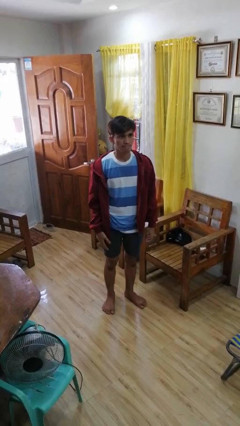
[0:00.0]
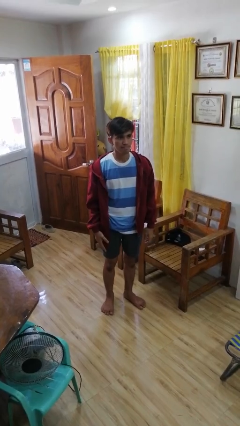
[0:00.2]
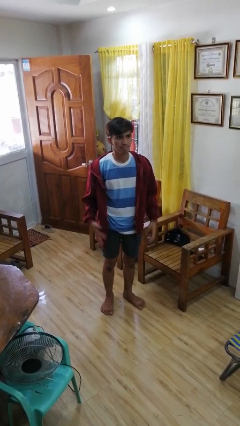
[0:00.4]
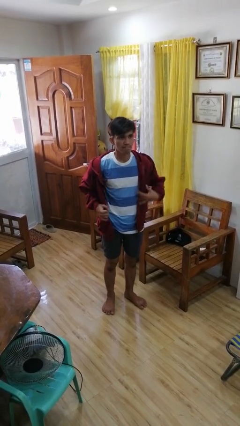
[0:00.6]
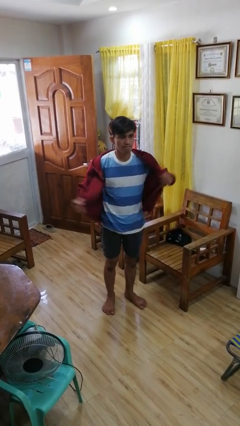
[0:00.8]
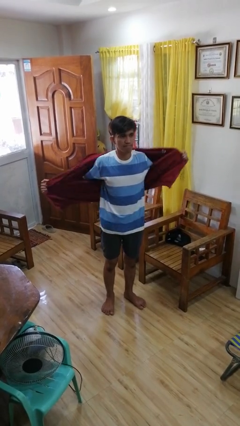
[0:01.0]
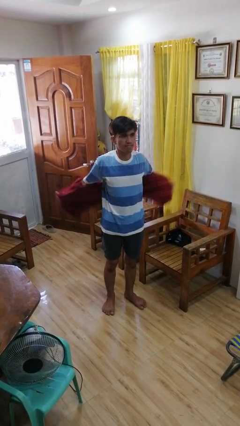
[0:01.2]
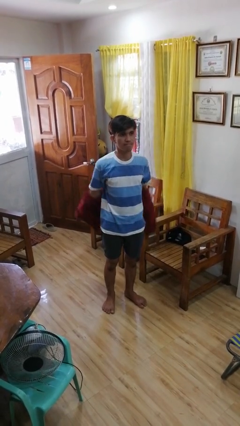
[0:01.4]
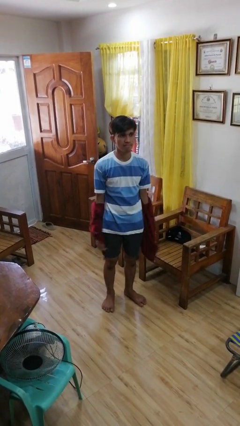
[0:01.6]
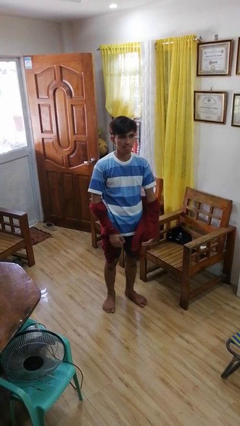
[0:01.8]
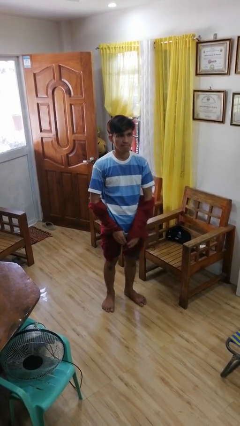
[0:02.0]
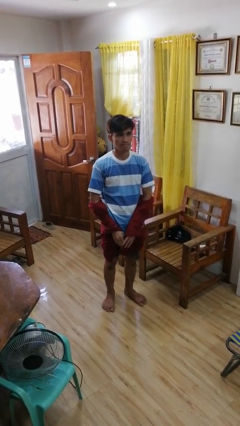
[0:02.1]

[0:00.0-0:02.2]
person takes off jacket

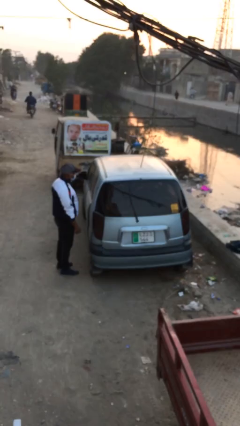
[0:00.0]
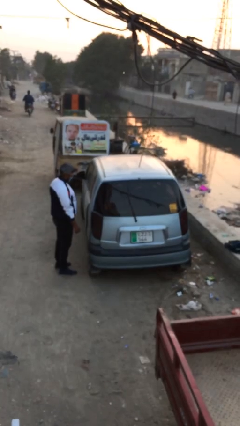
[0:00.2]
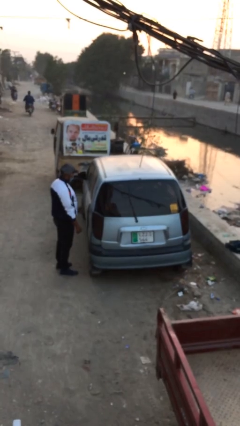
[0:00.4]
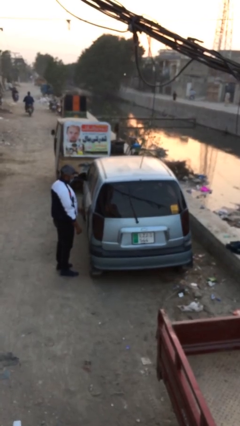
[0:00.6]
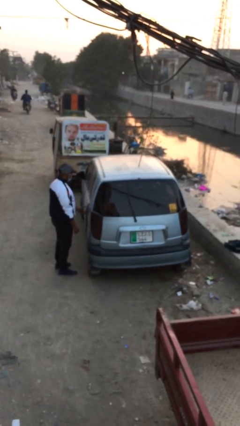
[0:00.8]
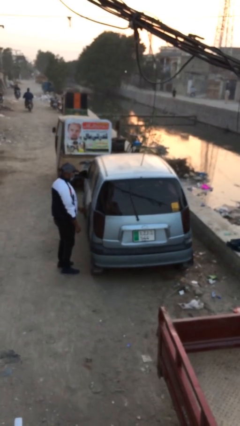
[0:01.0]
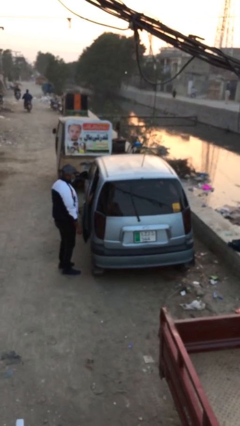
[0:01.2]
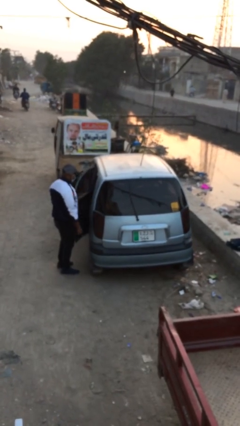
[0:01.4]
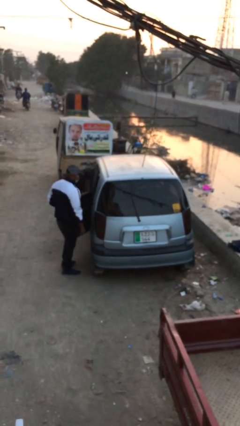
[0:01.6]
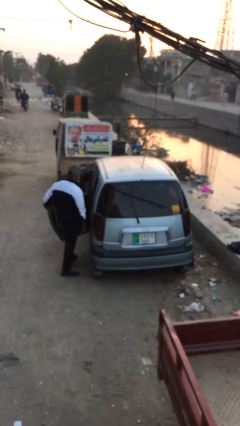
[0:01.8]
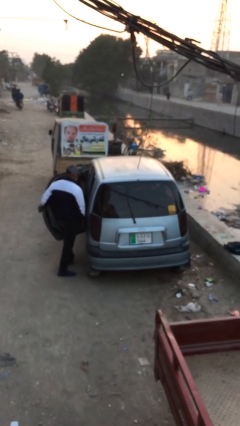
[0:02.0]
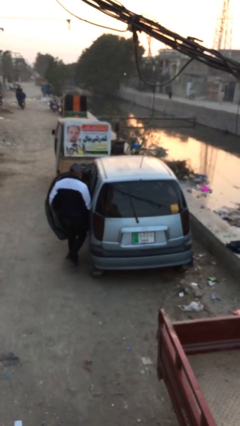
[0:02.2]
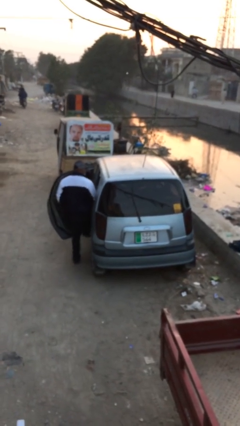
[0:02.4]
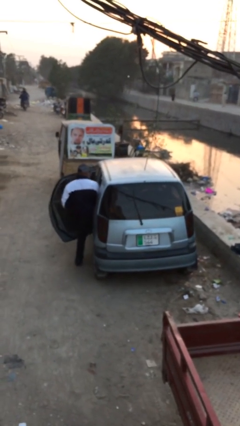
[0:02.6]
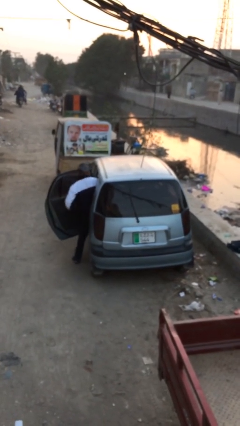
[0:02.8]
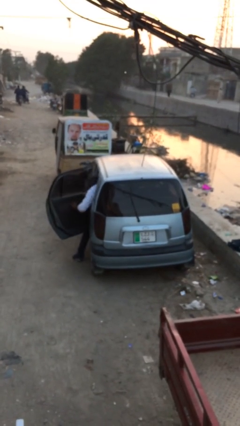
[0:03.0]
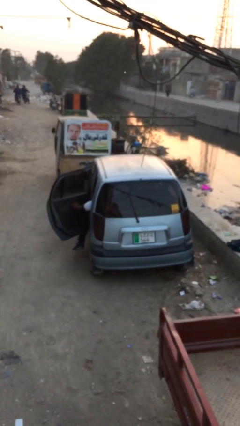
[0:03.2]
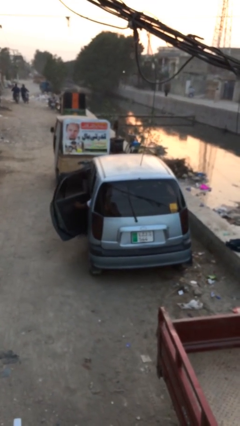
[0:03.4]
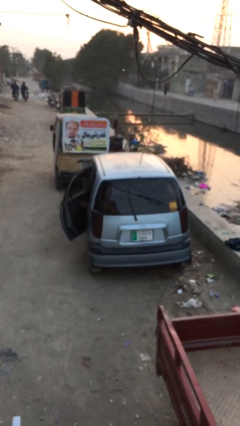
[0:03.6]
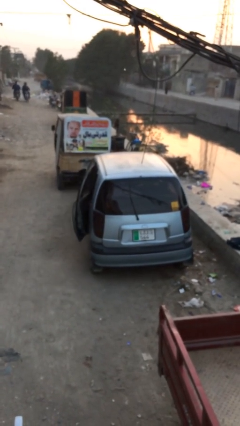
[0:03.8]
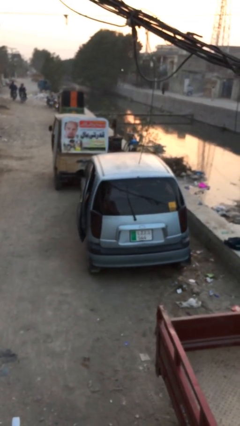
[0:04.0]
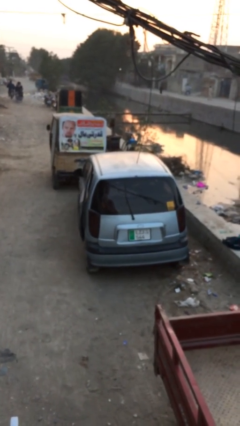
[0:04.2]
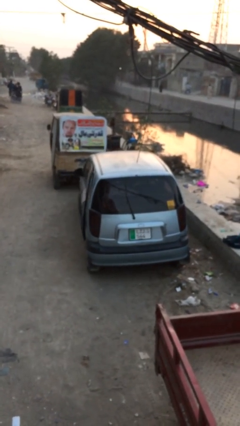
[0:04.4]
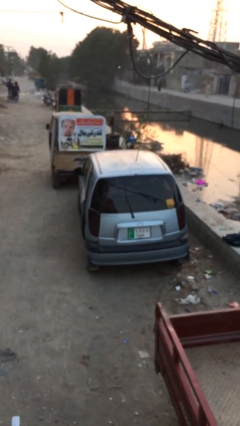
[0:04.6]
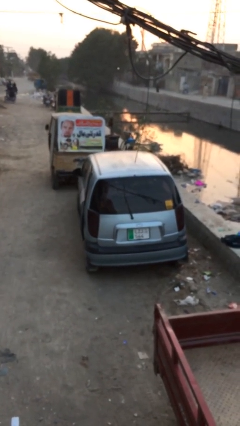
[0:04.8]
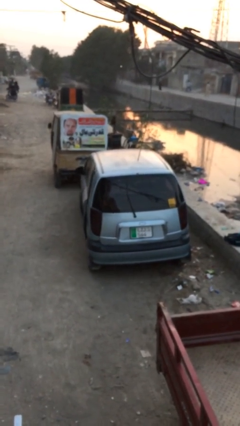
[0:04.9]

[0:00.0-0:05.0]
car picks up person

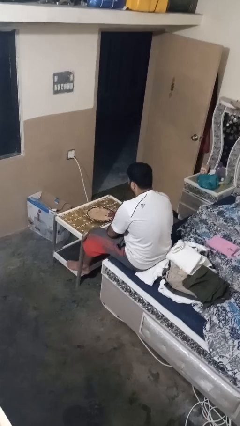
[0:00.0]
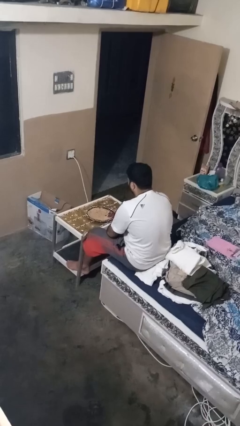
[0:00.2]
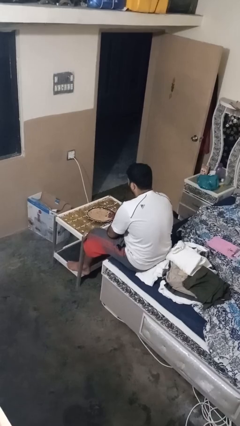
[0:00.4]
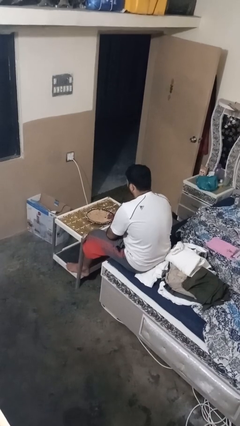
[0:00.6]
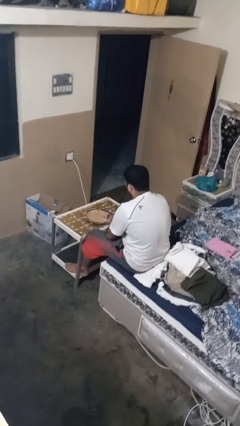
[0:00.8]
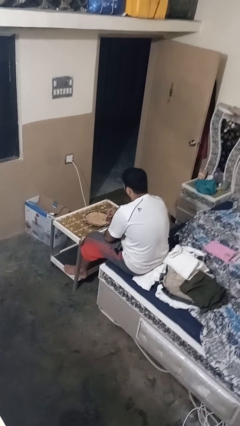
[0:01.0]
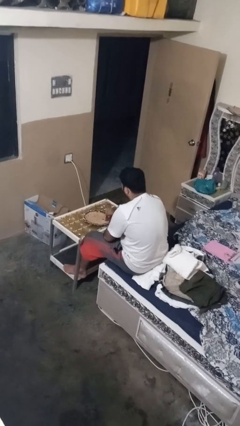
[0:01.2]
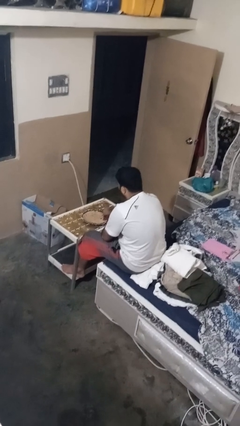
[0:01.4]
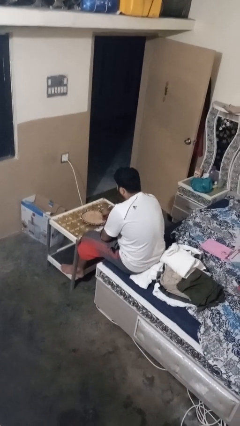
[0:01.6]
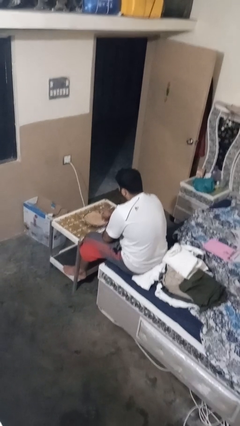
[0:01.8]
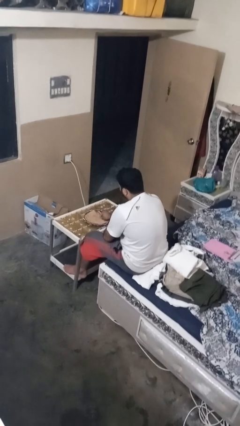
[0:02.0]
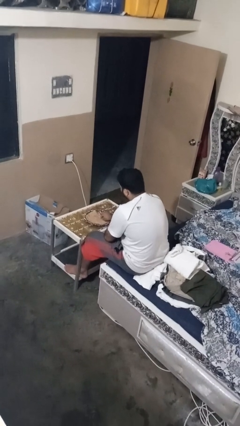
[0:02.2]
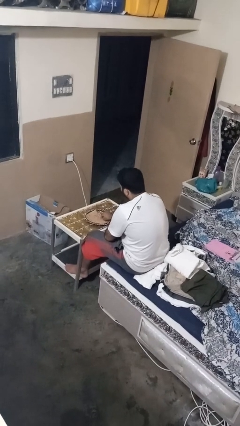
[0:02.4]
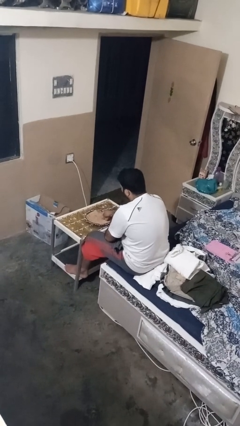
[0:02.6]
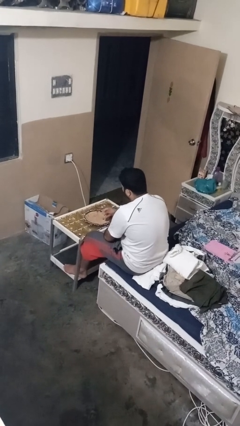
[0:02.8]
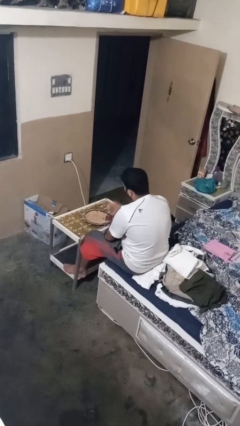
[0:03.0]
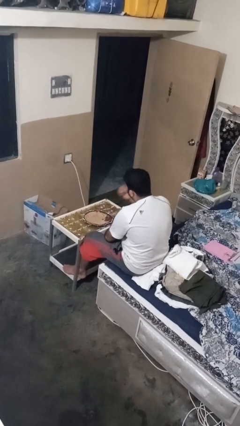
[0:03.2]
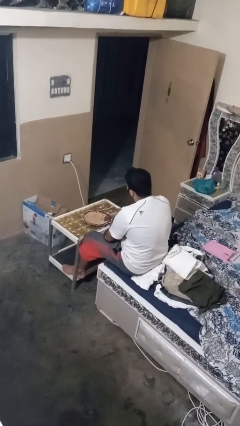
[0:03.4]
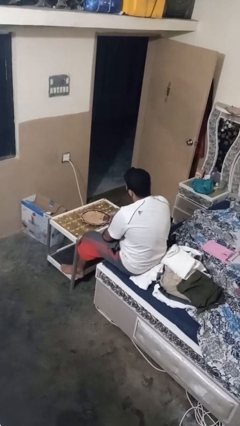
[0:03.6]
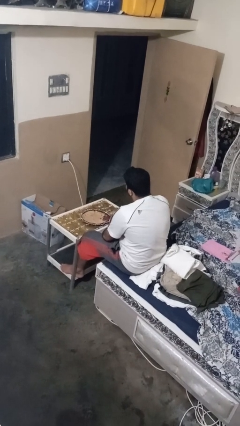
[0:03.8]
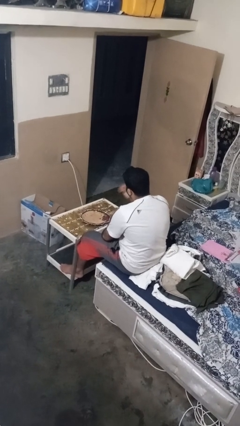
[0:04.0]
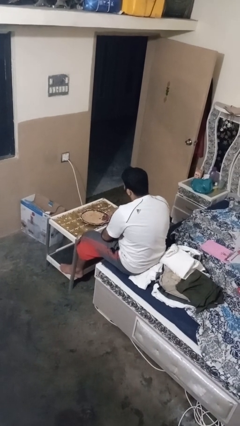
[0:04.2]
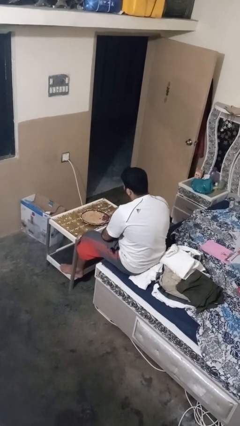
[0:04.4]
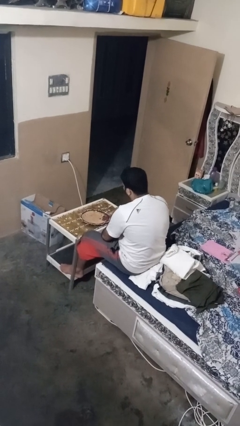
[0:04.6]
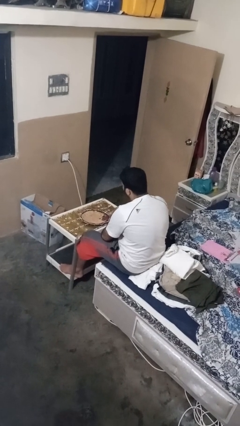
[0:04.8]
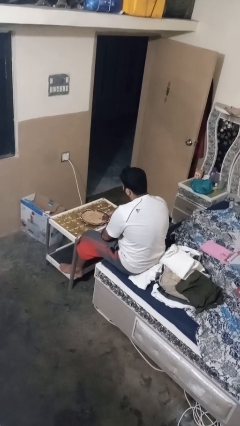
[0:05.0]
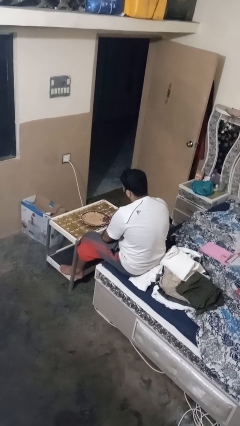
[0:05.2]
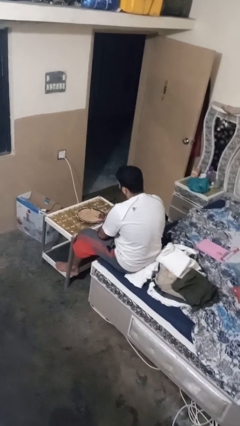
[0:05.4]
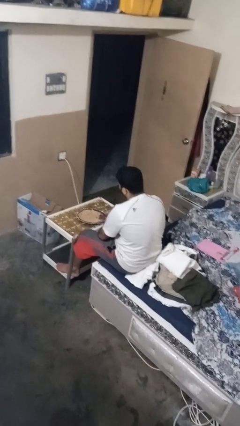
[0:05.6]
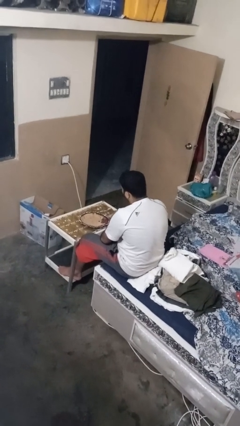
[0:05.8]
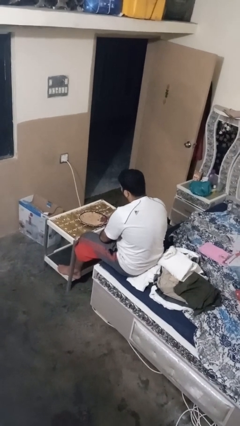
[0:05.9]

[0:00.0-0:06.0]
person eats with hands

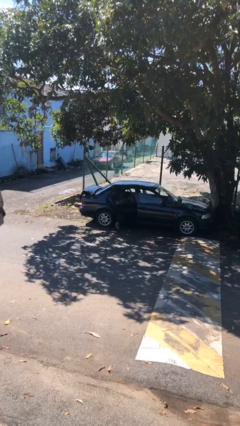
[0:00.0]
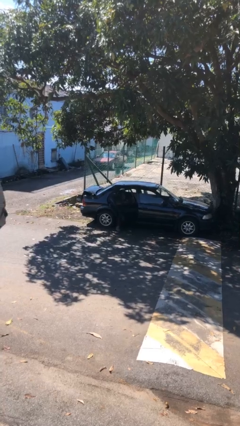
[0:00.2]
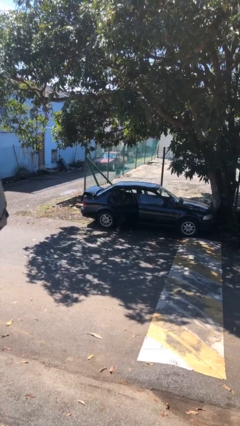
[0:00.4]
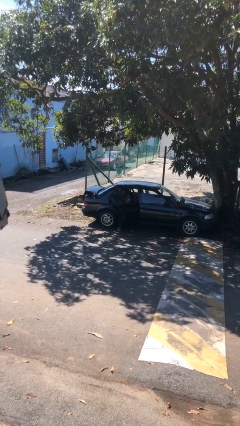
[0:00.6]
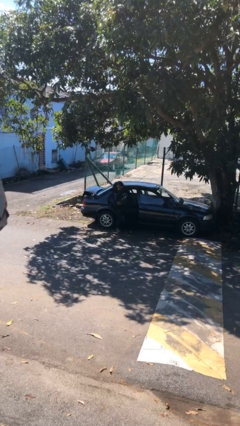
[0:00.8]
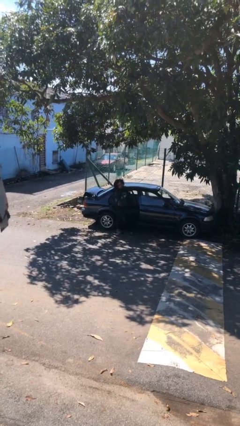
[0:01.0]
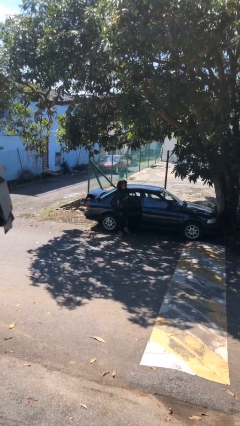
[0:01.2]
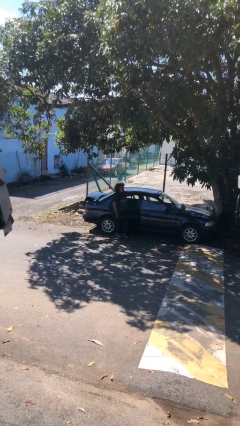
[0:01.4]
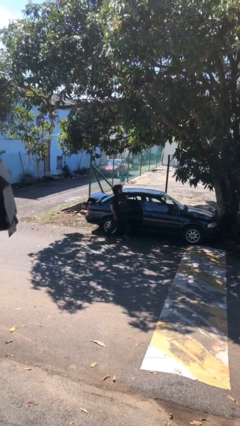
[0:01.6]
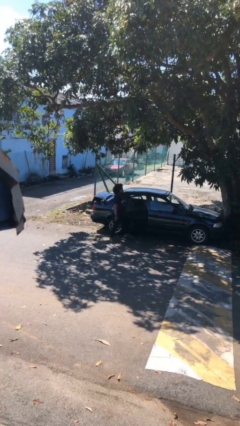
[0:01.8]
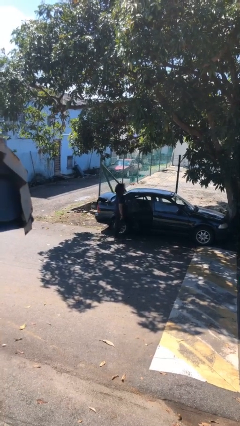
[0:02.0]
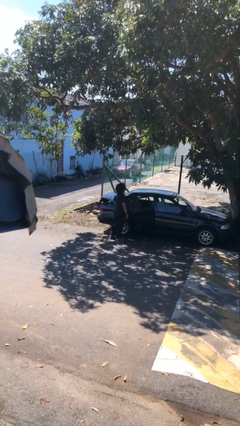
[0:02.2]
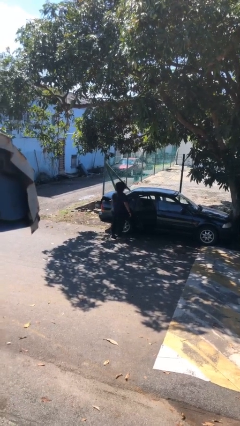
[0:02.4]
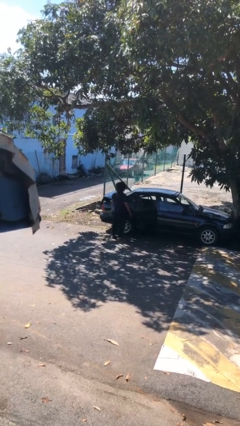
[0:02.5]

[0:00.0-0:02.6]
person exits car

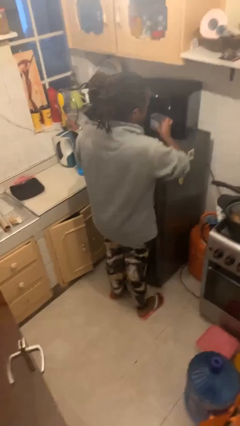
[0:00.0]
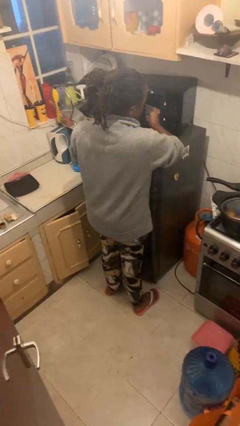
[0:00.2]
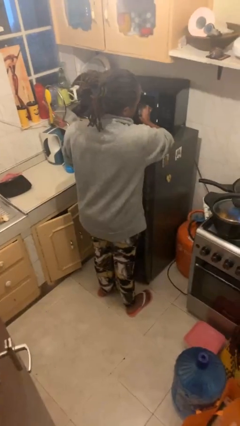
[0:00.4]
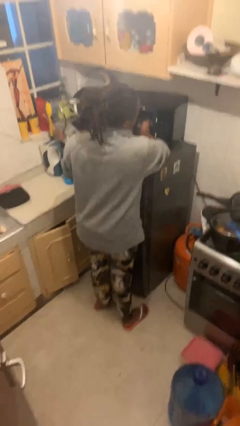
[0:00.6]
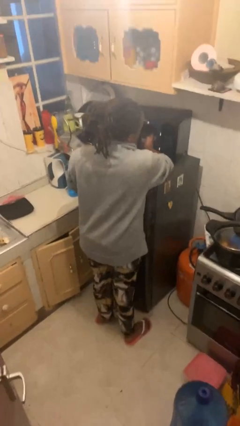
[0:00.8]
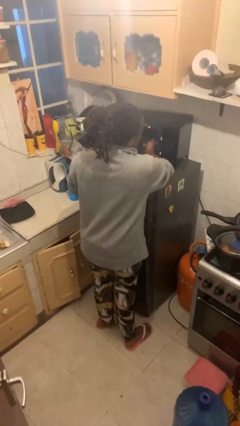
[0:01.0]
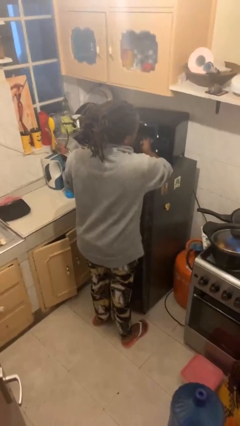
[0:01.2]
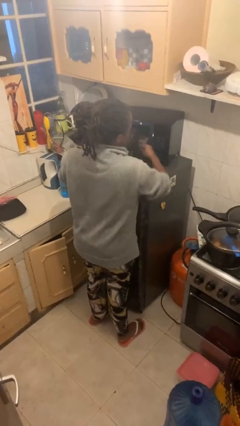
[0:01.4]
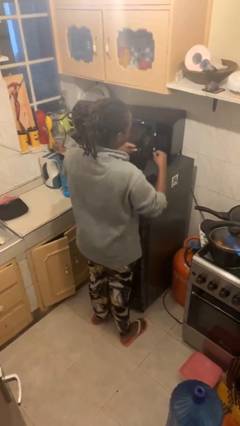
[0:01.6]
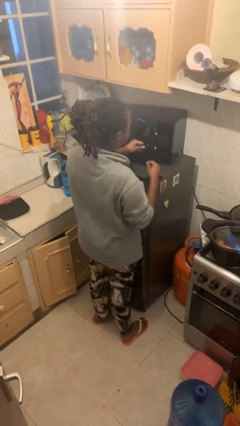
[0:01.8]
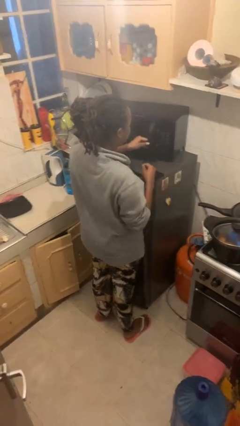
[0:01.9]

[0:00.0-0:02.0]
person puts object into microwave
